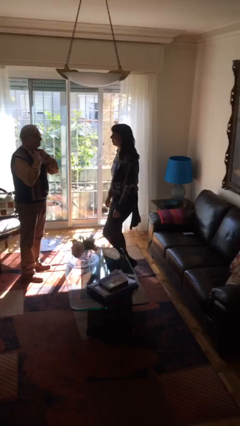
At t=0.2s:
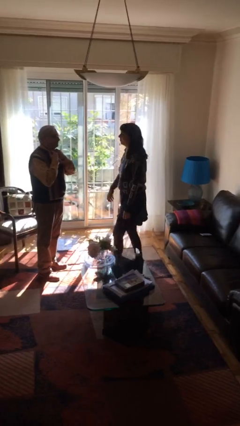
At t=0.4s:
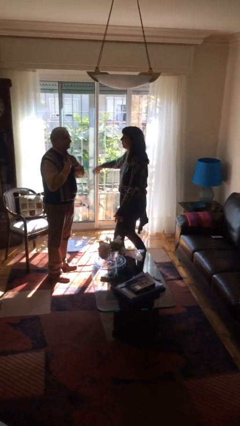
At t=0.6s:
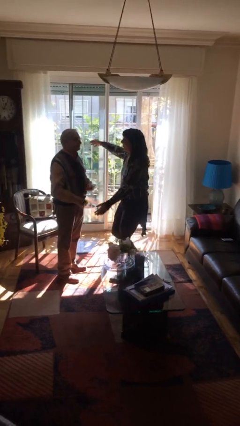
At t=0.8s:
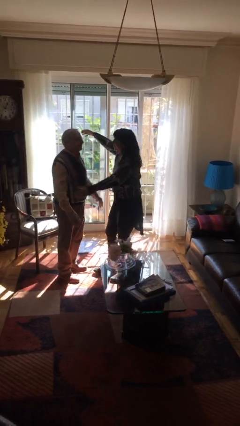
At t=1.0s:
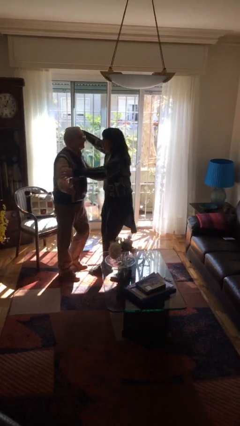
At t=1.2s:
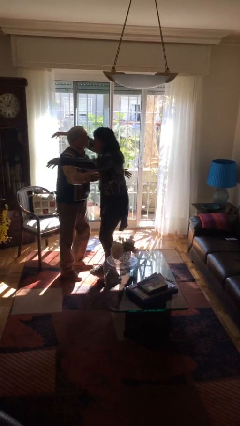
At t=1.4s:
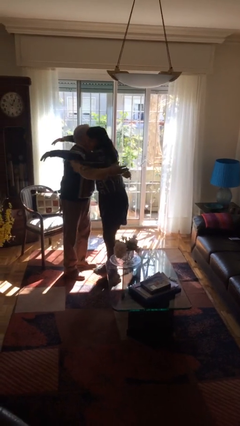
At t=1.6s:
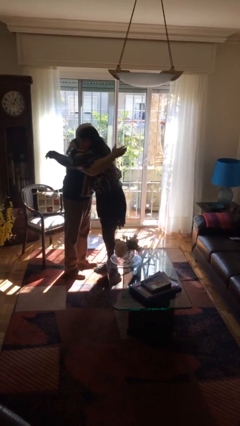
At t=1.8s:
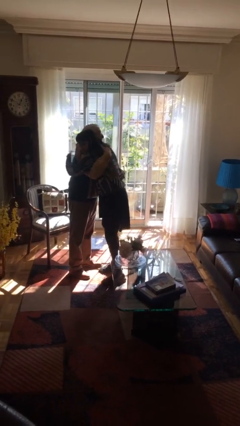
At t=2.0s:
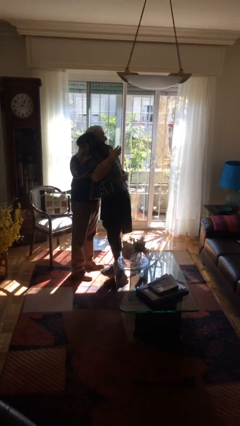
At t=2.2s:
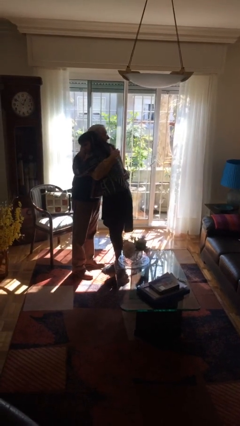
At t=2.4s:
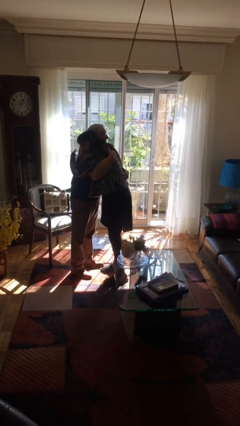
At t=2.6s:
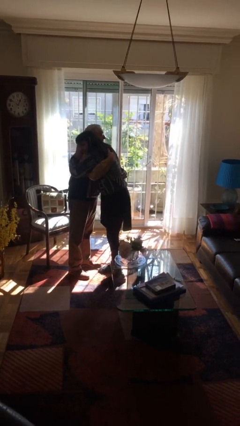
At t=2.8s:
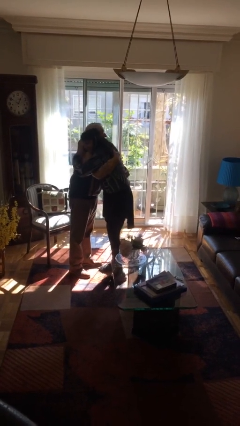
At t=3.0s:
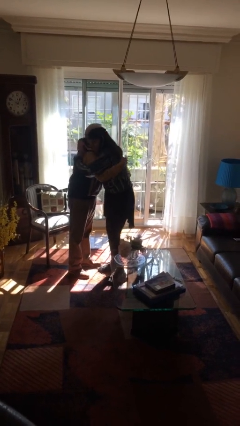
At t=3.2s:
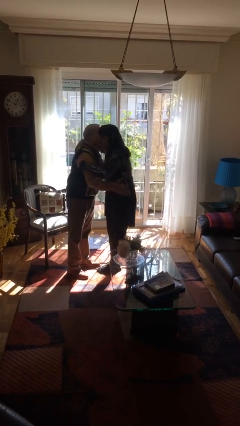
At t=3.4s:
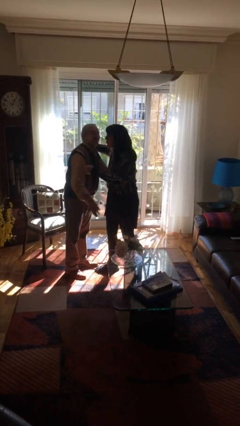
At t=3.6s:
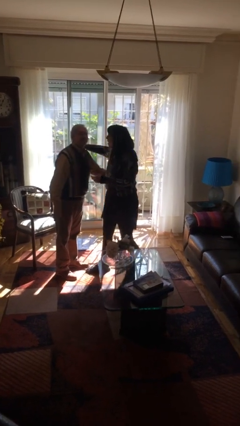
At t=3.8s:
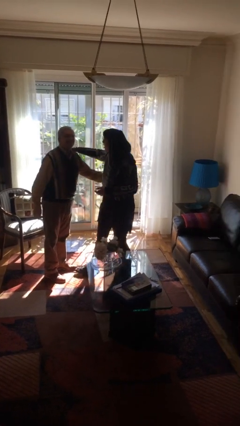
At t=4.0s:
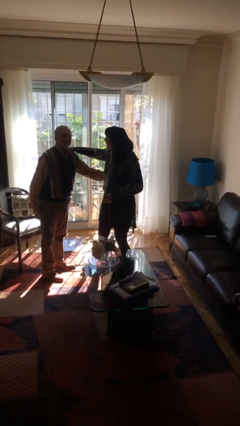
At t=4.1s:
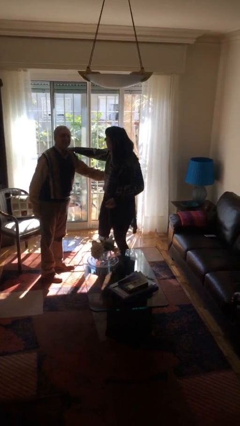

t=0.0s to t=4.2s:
person embraces person

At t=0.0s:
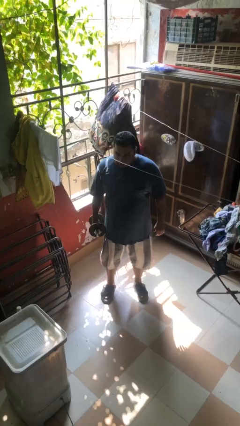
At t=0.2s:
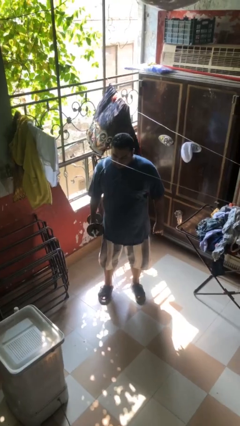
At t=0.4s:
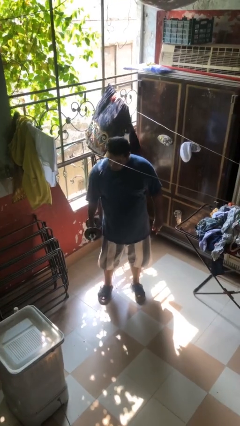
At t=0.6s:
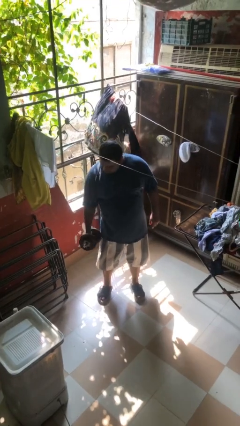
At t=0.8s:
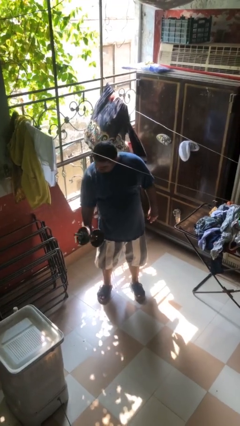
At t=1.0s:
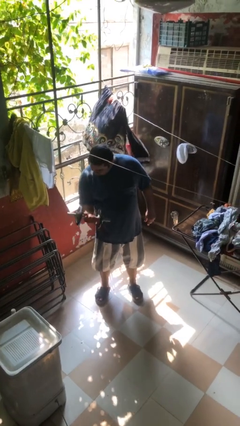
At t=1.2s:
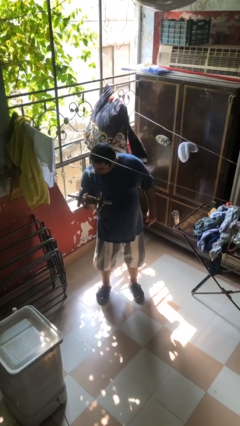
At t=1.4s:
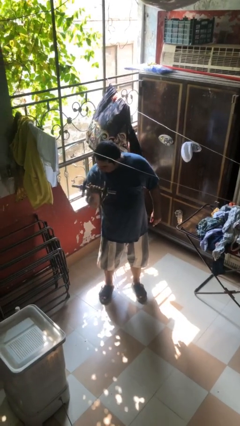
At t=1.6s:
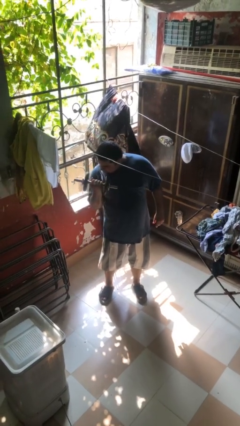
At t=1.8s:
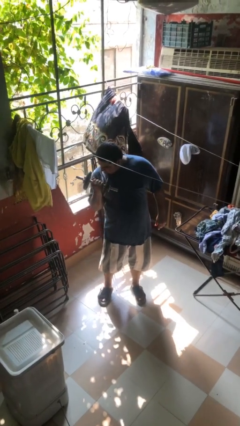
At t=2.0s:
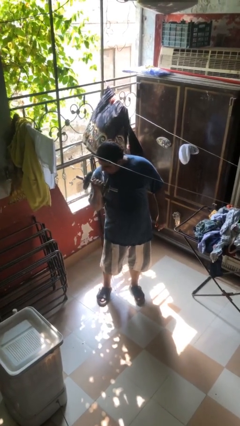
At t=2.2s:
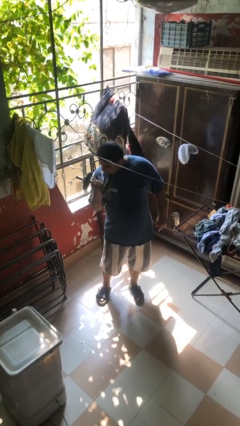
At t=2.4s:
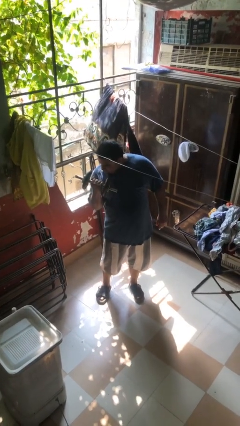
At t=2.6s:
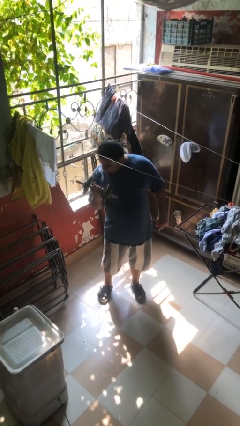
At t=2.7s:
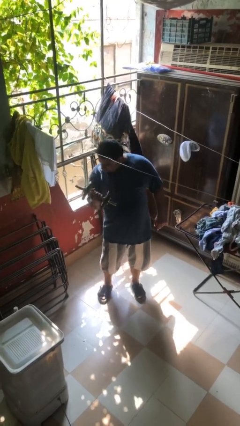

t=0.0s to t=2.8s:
person lifts dumbbells

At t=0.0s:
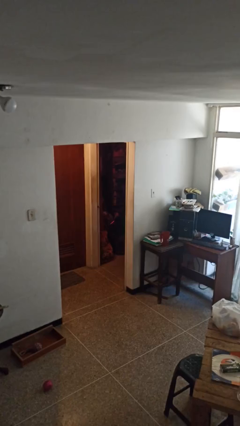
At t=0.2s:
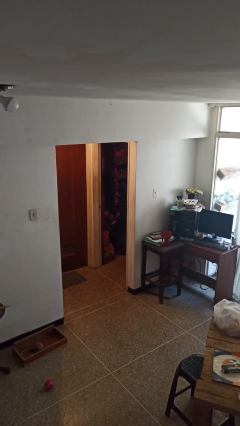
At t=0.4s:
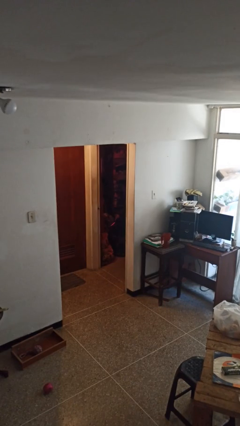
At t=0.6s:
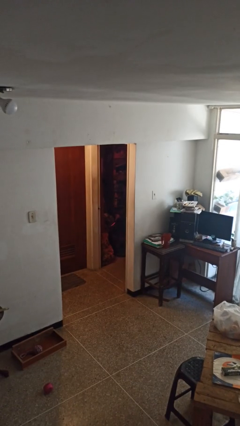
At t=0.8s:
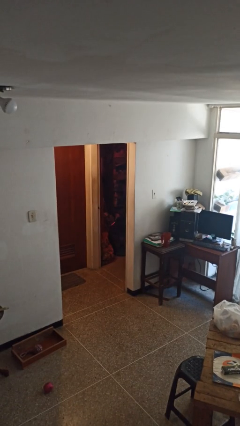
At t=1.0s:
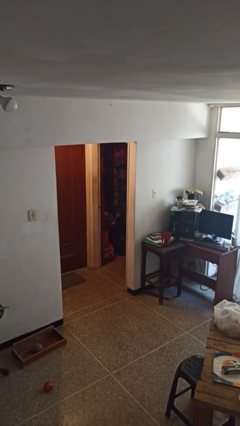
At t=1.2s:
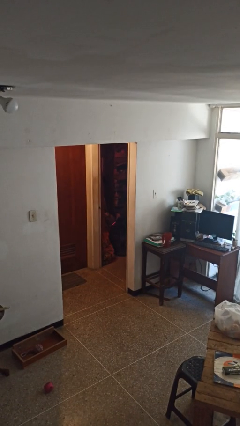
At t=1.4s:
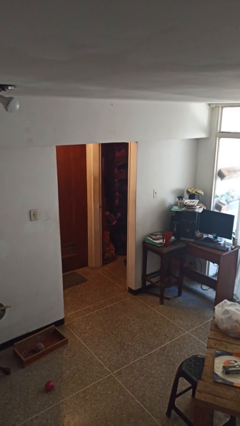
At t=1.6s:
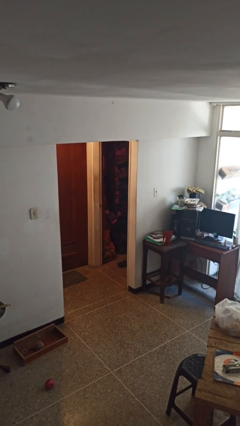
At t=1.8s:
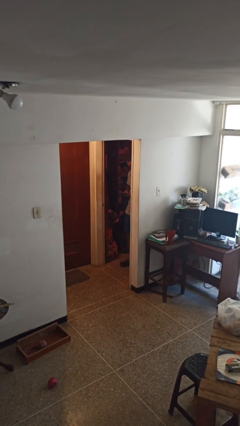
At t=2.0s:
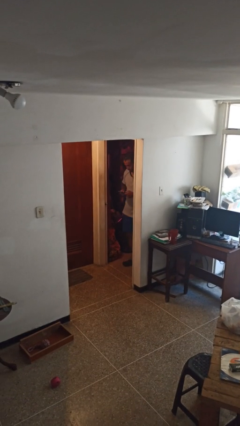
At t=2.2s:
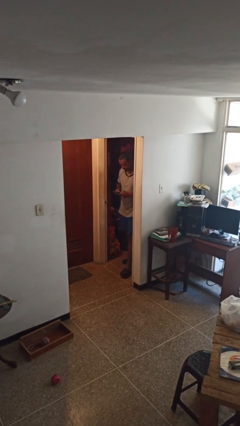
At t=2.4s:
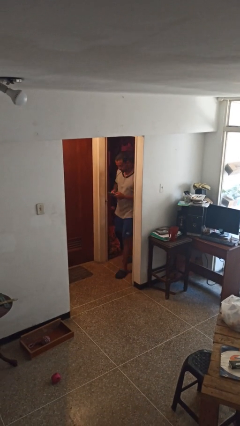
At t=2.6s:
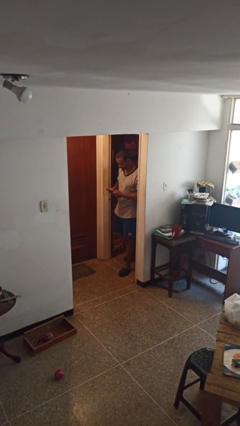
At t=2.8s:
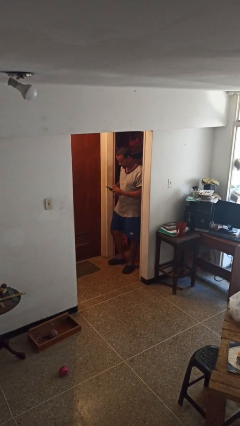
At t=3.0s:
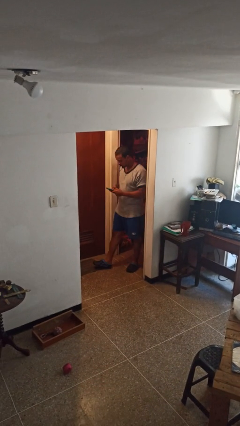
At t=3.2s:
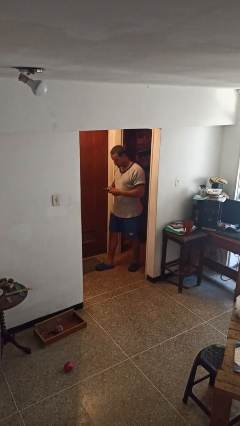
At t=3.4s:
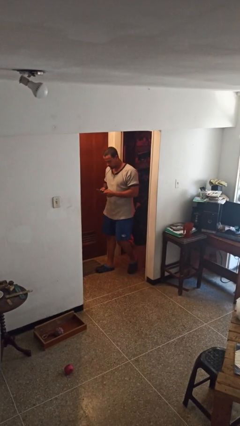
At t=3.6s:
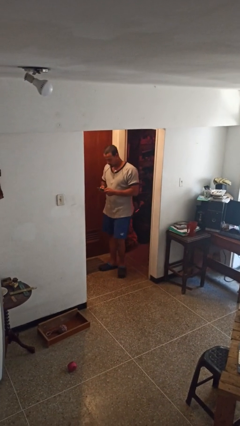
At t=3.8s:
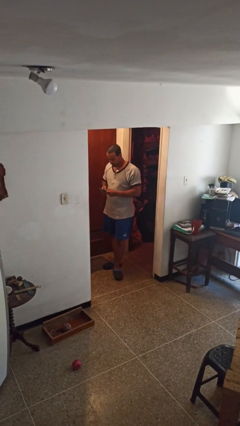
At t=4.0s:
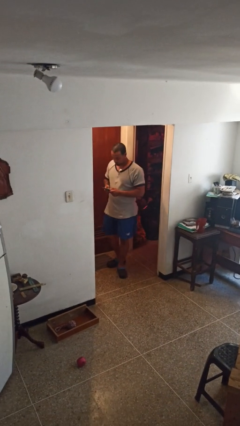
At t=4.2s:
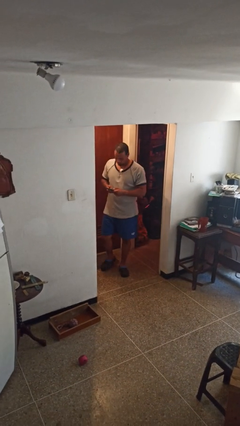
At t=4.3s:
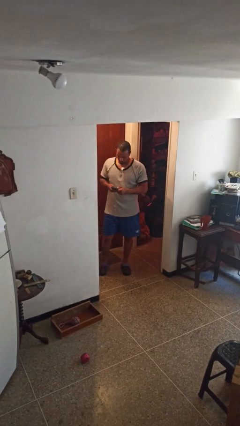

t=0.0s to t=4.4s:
person enters scene through structure

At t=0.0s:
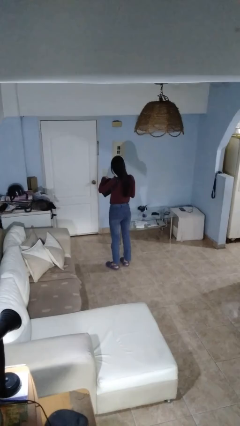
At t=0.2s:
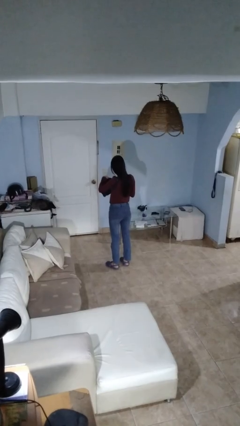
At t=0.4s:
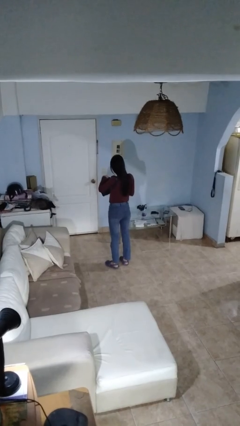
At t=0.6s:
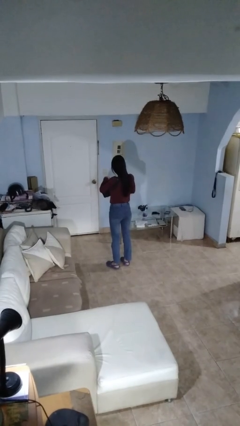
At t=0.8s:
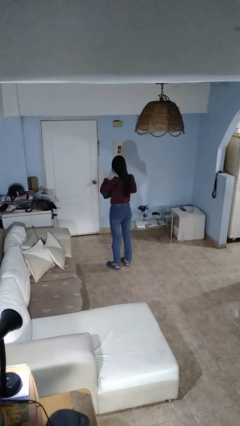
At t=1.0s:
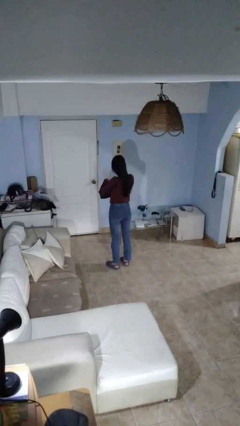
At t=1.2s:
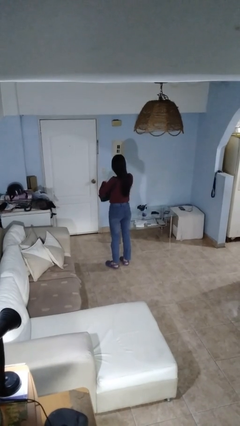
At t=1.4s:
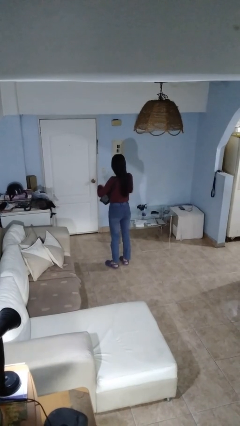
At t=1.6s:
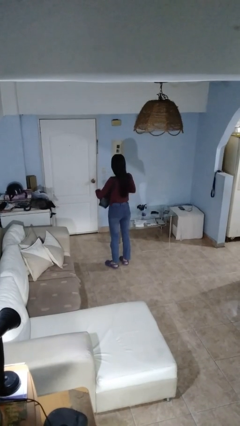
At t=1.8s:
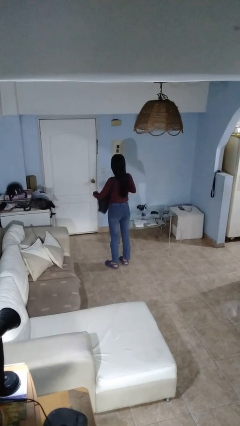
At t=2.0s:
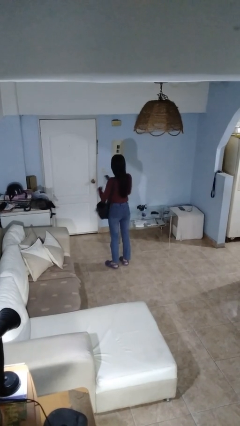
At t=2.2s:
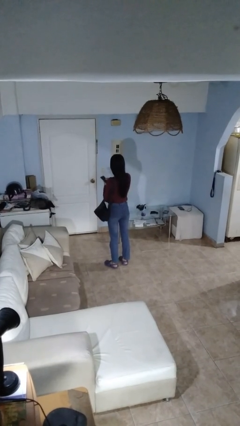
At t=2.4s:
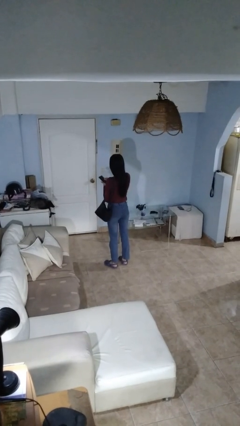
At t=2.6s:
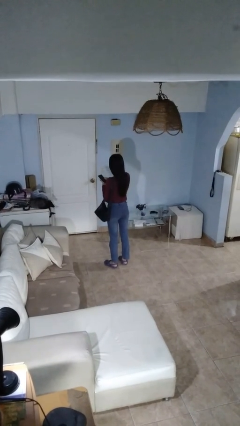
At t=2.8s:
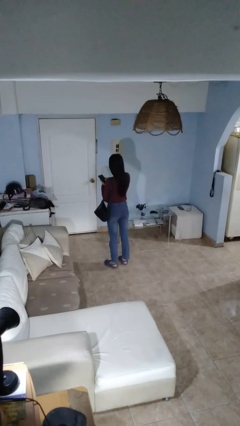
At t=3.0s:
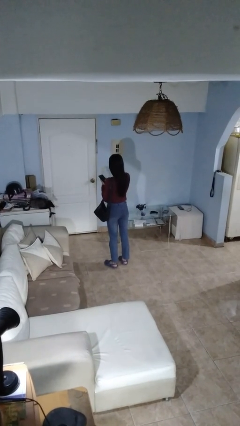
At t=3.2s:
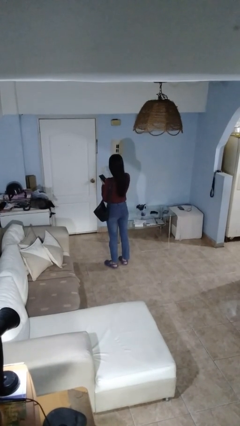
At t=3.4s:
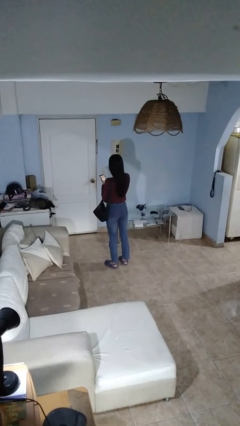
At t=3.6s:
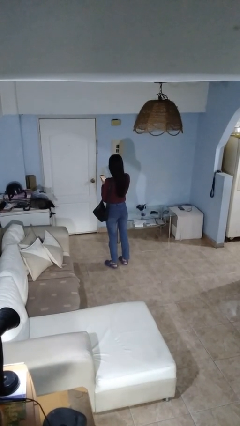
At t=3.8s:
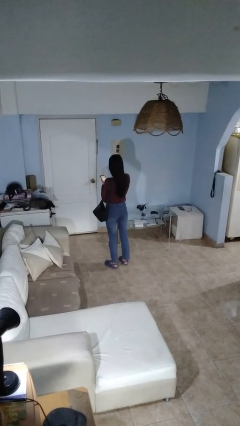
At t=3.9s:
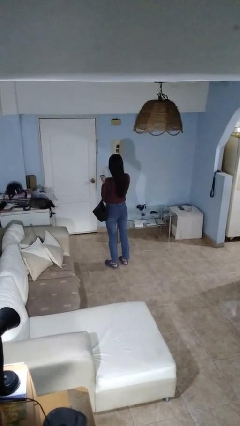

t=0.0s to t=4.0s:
person takes object from purse

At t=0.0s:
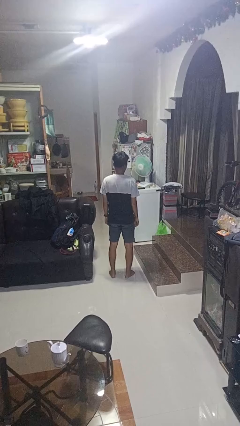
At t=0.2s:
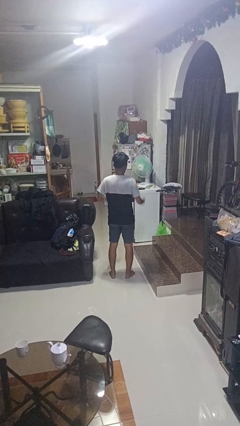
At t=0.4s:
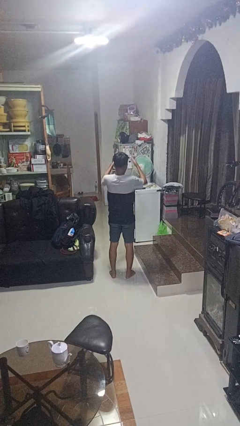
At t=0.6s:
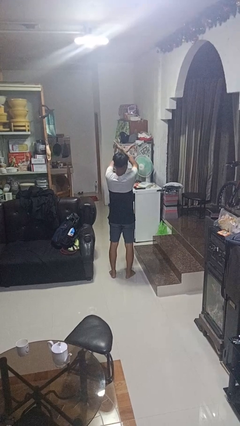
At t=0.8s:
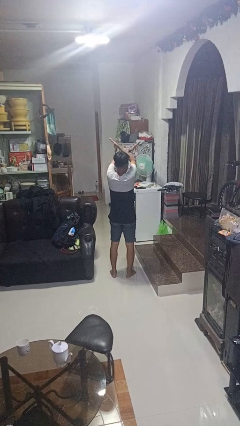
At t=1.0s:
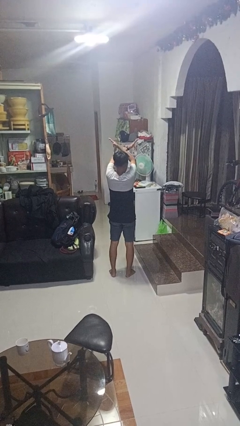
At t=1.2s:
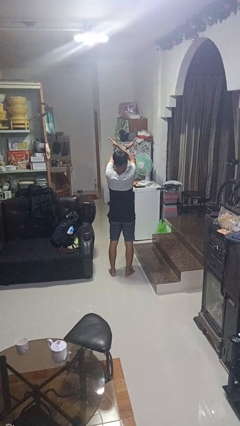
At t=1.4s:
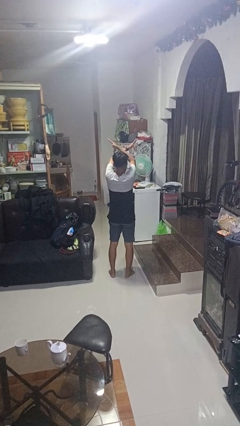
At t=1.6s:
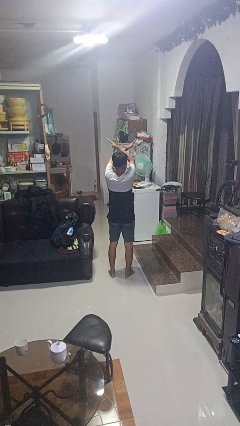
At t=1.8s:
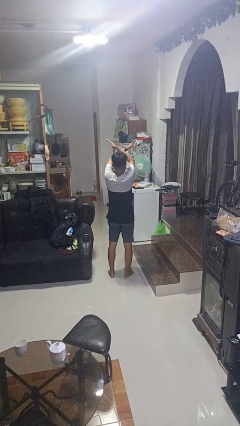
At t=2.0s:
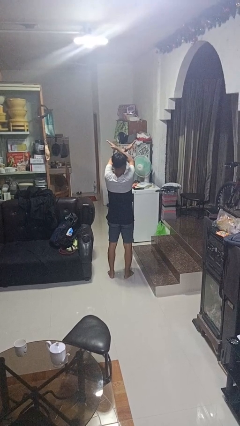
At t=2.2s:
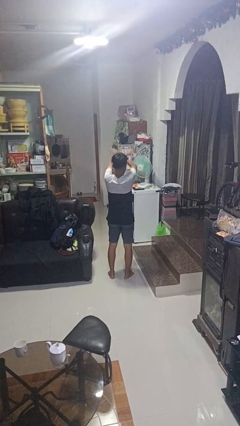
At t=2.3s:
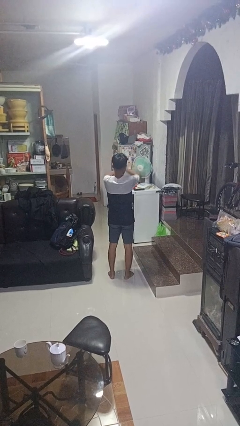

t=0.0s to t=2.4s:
person gestures arms x
